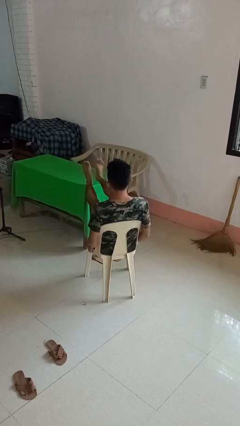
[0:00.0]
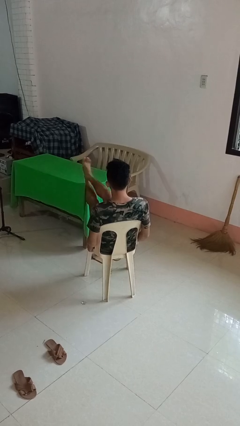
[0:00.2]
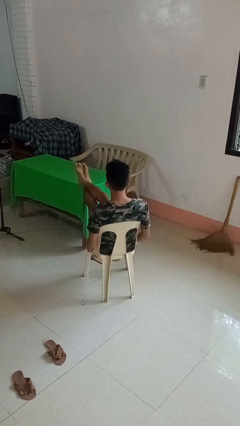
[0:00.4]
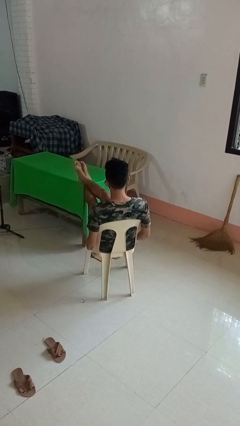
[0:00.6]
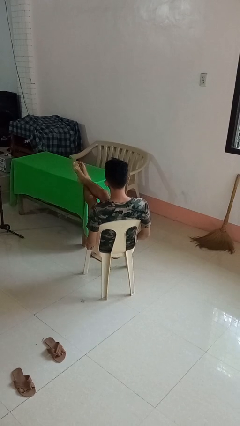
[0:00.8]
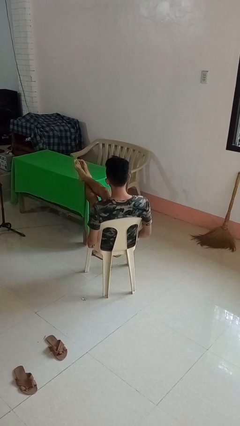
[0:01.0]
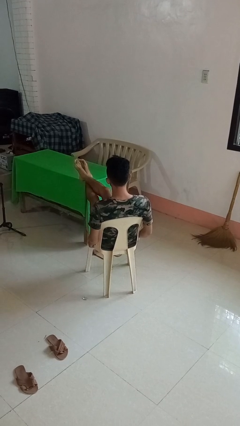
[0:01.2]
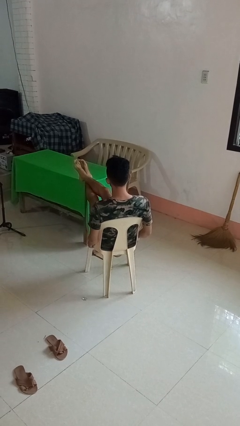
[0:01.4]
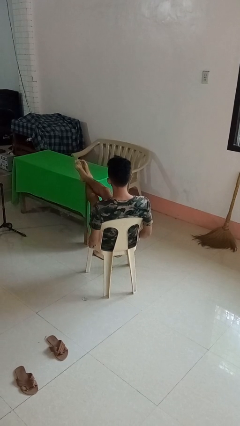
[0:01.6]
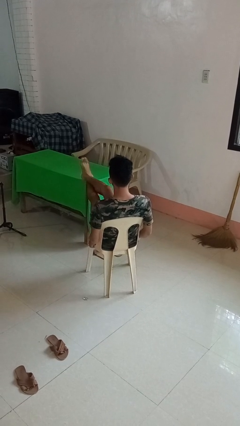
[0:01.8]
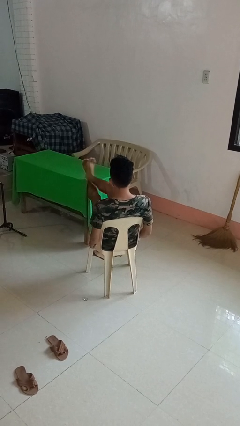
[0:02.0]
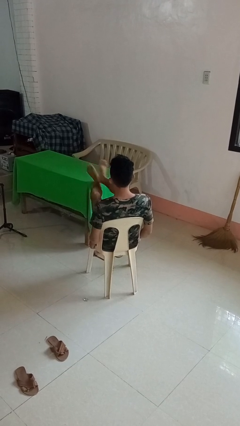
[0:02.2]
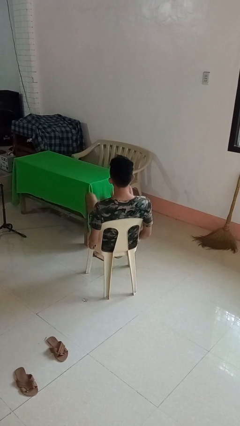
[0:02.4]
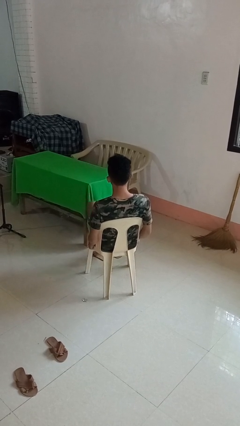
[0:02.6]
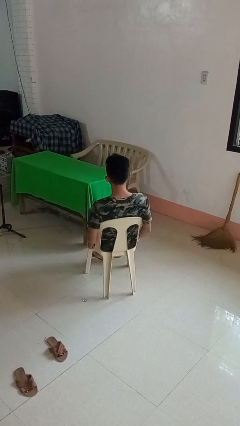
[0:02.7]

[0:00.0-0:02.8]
person puts feet up

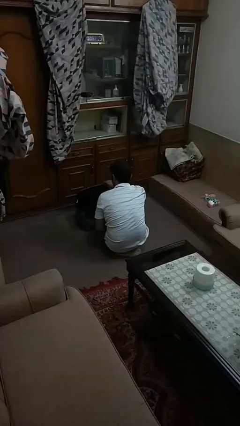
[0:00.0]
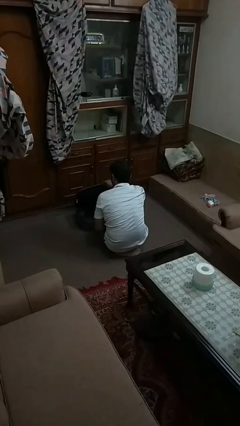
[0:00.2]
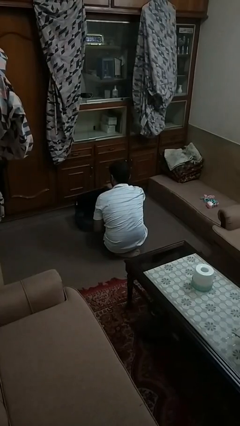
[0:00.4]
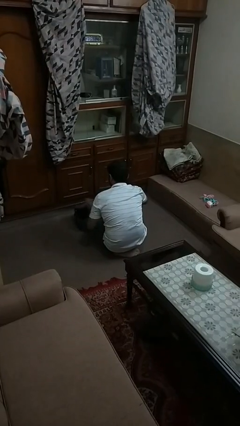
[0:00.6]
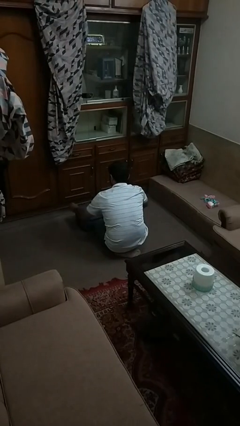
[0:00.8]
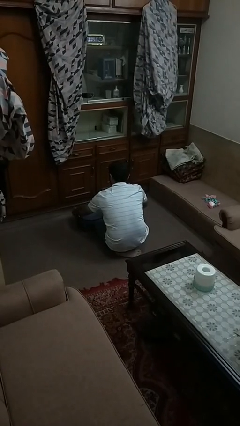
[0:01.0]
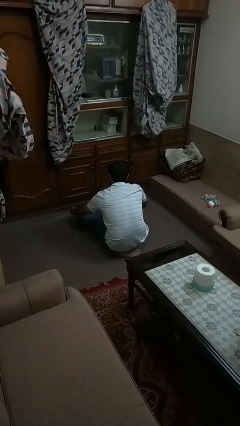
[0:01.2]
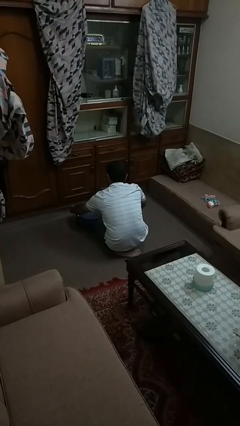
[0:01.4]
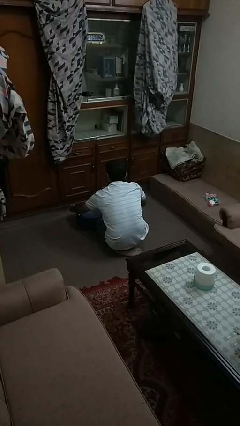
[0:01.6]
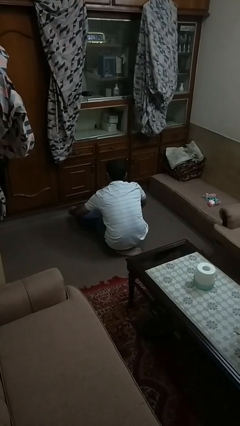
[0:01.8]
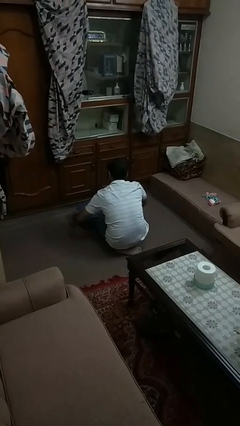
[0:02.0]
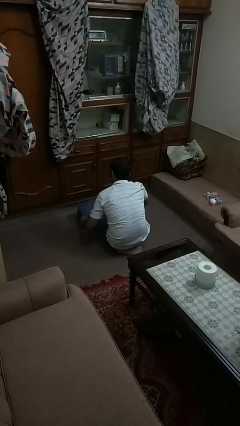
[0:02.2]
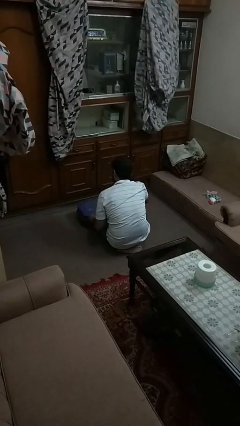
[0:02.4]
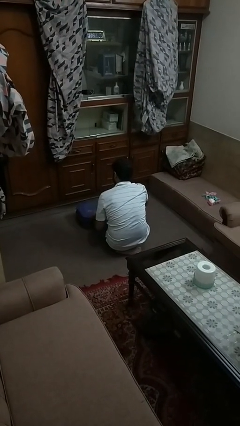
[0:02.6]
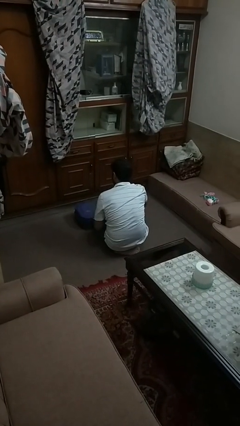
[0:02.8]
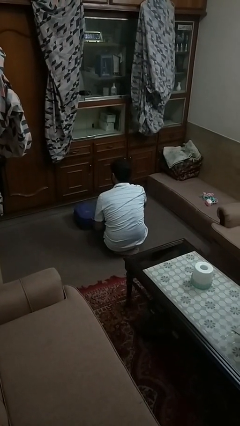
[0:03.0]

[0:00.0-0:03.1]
person closes suitcase

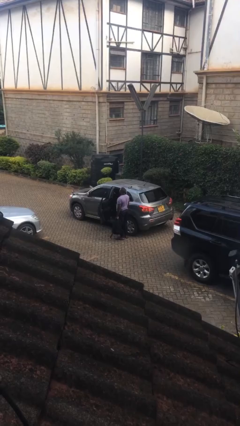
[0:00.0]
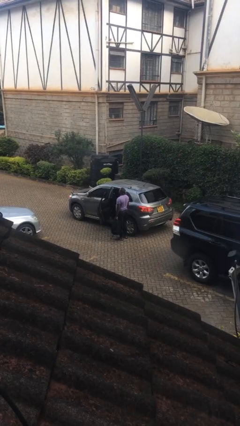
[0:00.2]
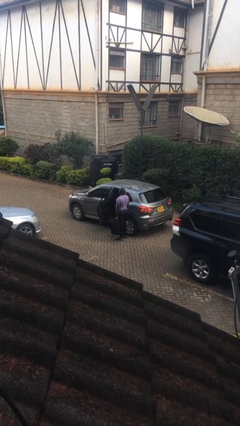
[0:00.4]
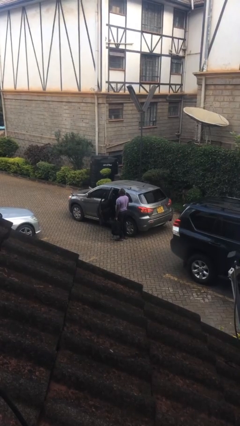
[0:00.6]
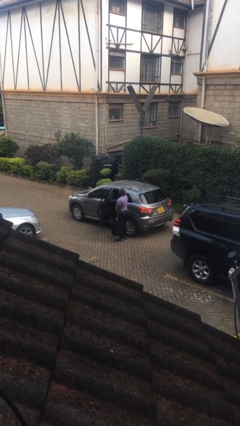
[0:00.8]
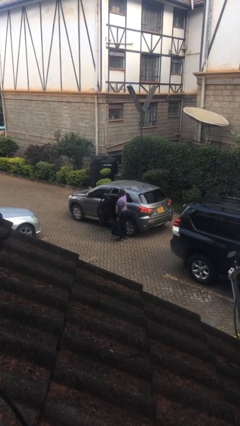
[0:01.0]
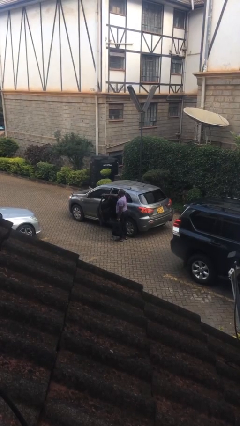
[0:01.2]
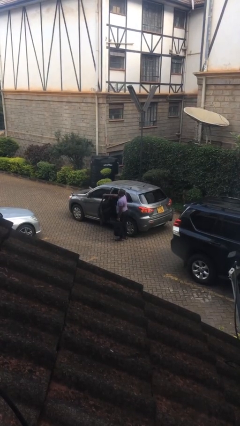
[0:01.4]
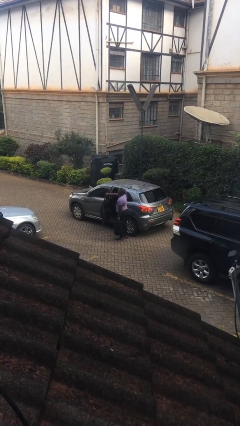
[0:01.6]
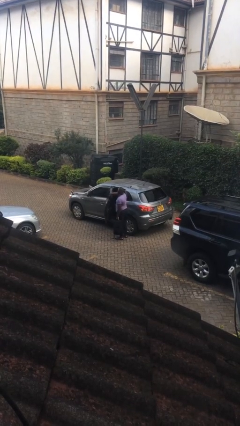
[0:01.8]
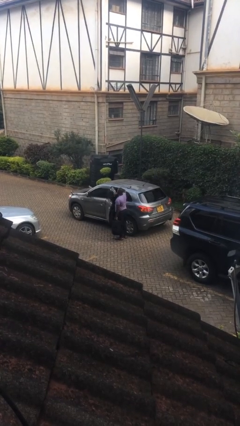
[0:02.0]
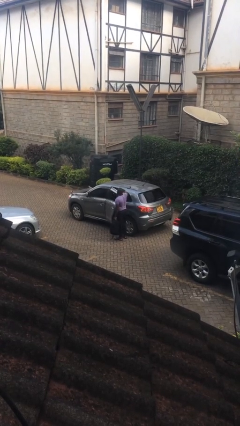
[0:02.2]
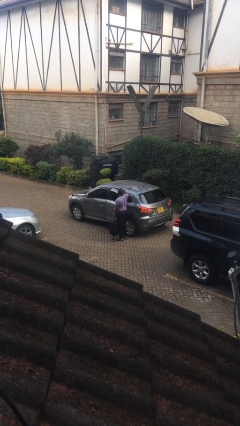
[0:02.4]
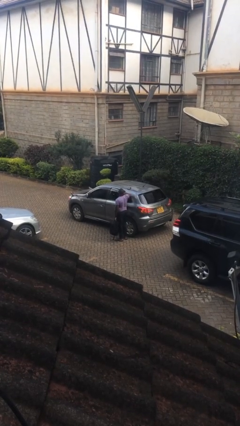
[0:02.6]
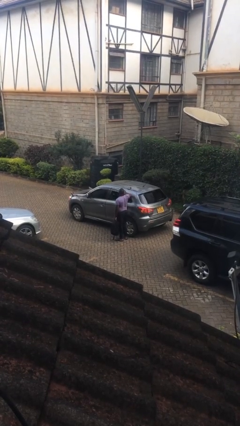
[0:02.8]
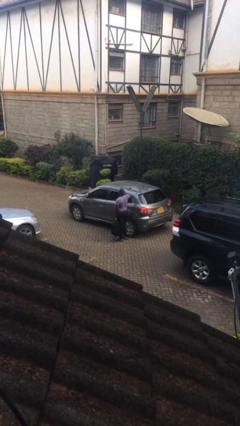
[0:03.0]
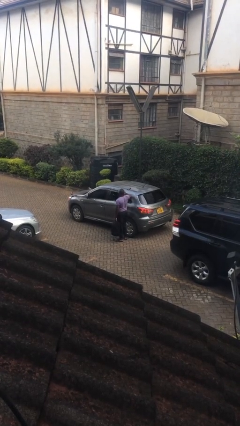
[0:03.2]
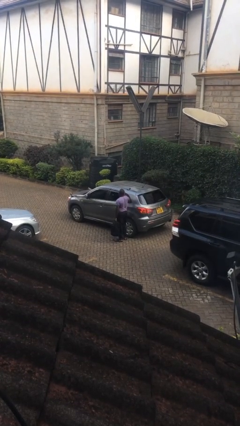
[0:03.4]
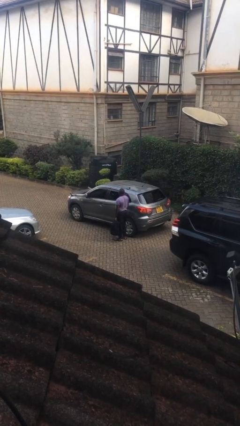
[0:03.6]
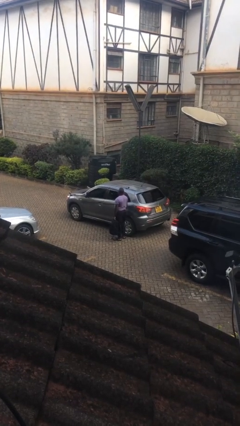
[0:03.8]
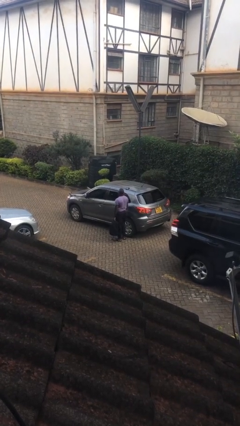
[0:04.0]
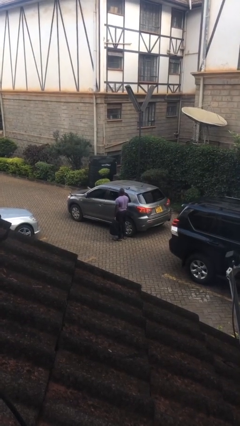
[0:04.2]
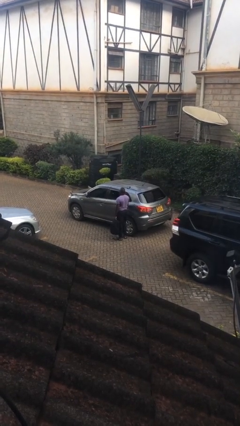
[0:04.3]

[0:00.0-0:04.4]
person closes car door

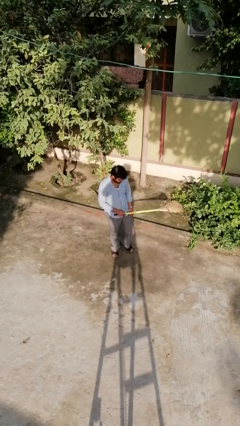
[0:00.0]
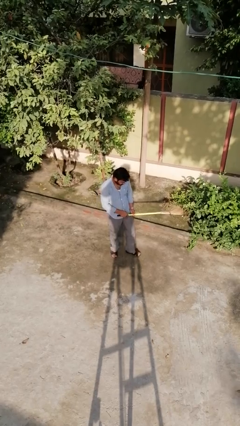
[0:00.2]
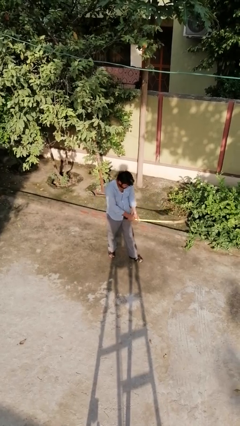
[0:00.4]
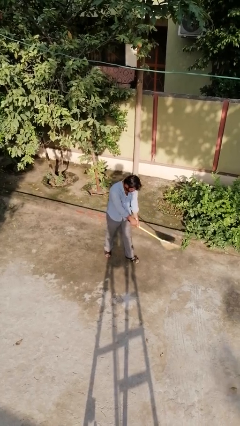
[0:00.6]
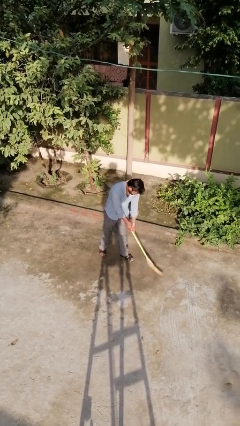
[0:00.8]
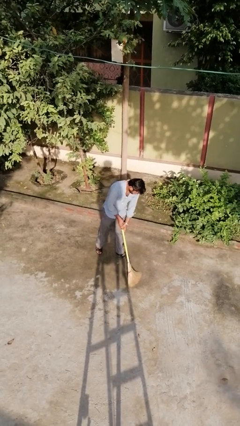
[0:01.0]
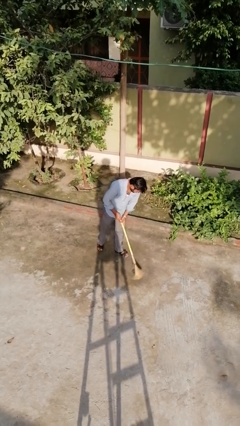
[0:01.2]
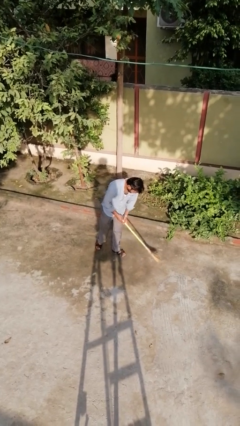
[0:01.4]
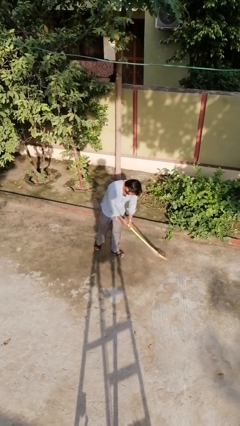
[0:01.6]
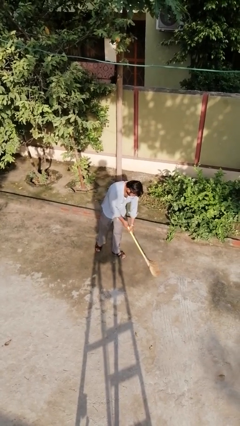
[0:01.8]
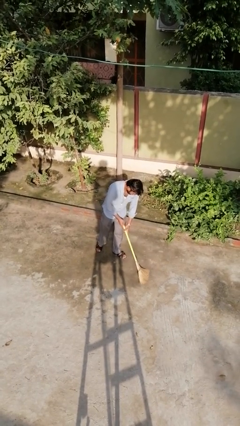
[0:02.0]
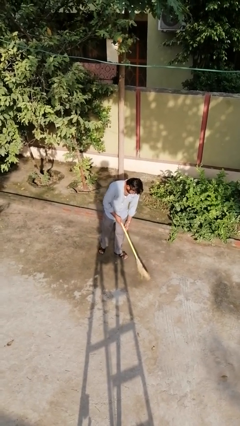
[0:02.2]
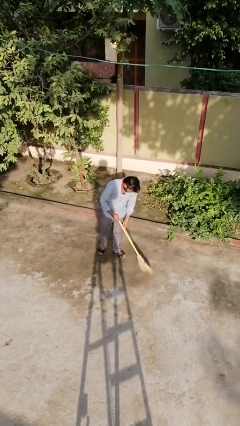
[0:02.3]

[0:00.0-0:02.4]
person sweeps floor

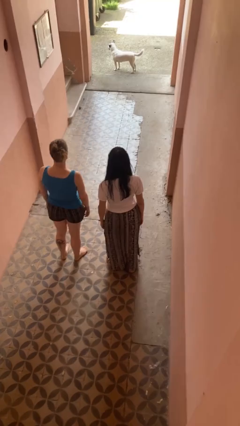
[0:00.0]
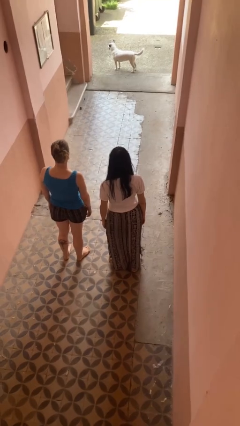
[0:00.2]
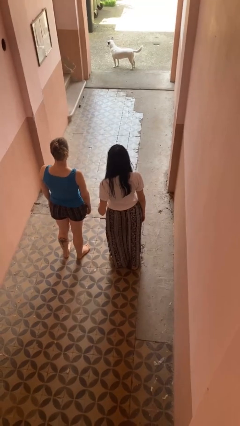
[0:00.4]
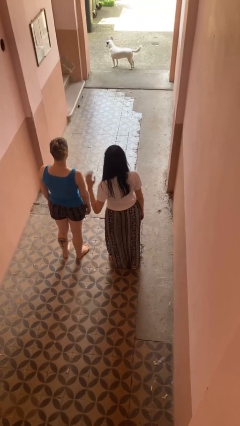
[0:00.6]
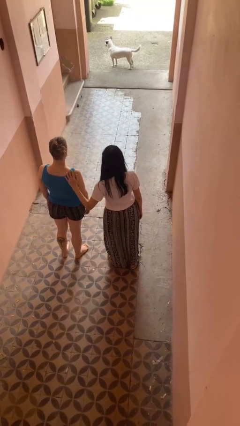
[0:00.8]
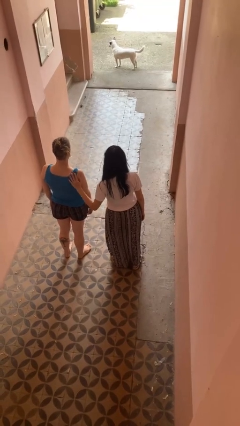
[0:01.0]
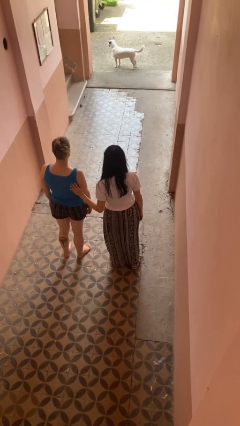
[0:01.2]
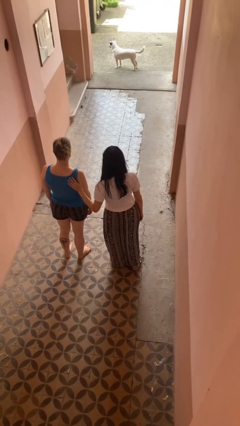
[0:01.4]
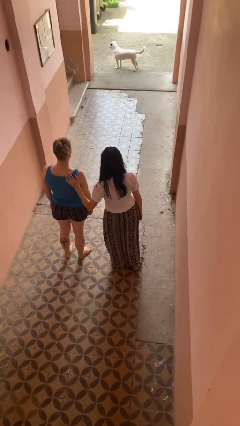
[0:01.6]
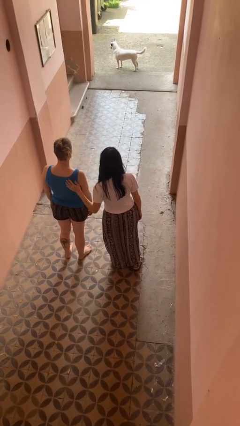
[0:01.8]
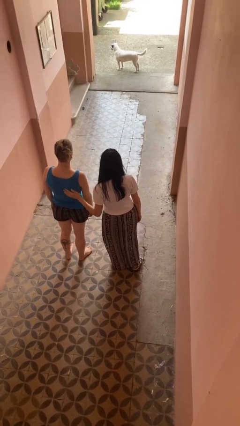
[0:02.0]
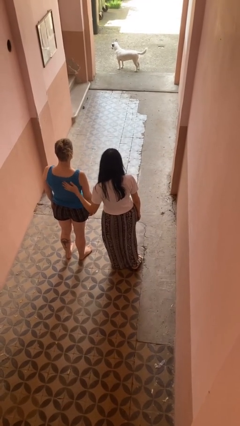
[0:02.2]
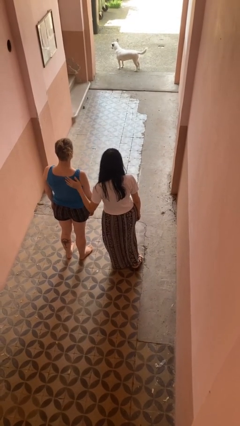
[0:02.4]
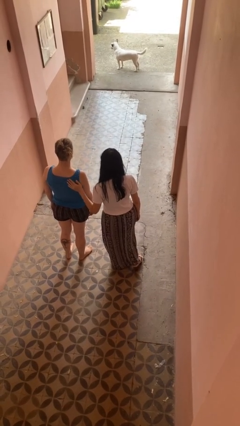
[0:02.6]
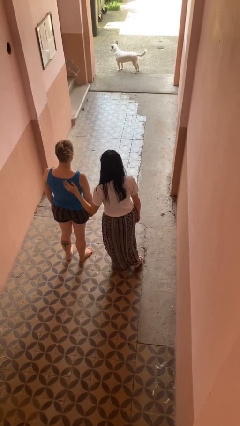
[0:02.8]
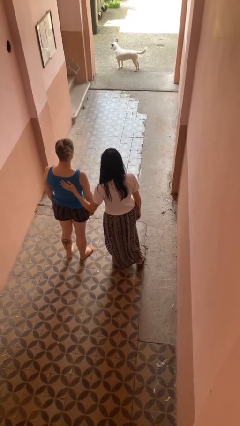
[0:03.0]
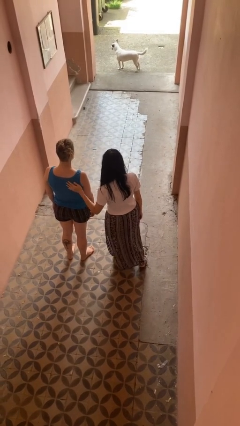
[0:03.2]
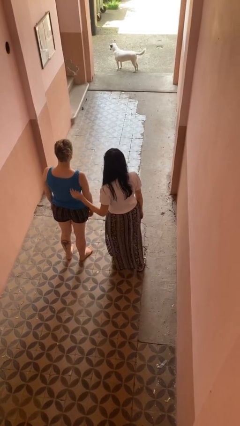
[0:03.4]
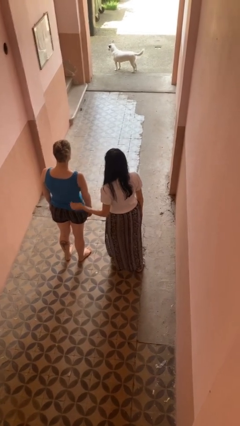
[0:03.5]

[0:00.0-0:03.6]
person touches back of person

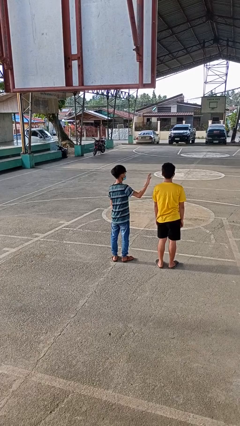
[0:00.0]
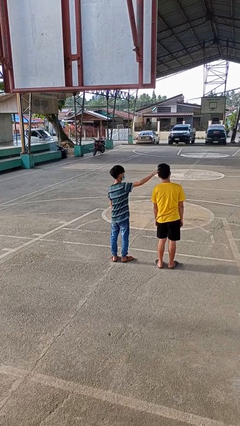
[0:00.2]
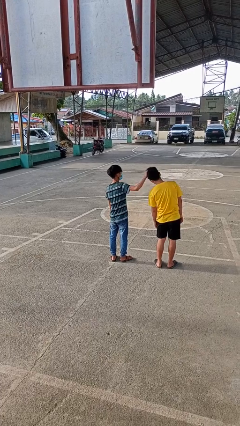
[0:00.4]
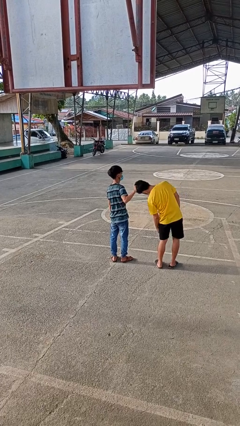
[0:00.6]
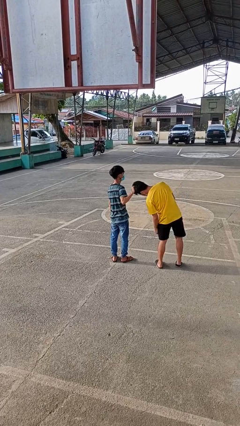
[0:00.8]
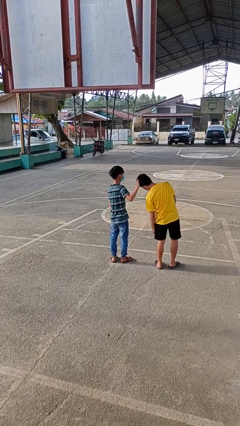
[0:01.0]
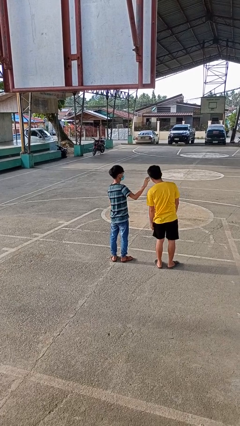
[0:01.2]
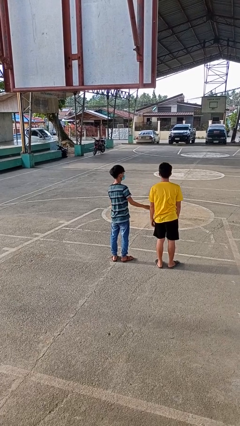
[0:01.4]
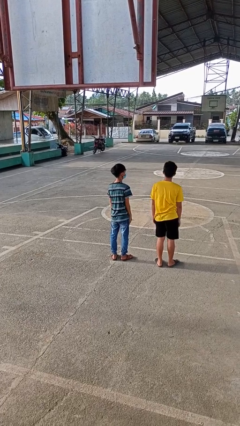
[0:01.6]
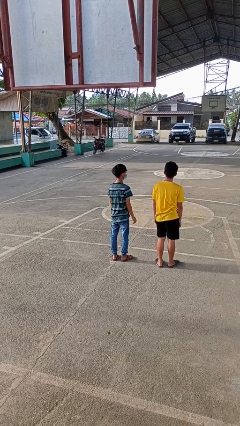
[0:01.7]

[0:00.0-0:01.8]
person grabs person by hair
